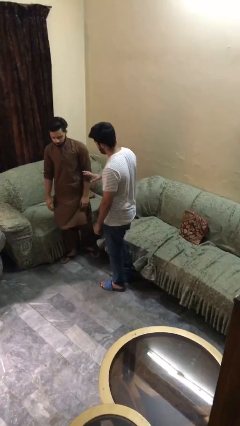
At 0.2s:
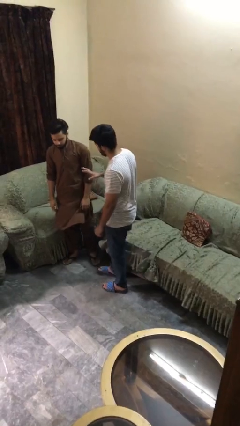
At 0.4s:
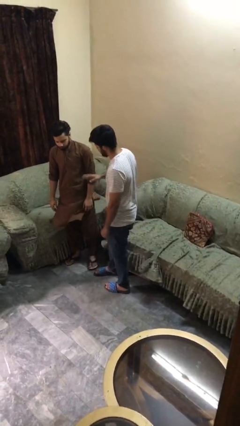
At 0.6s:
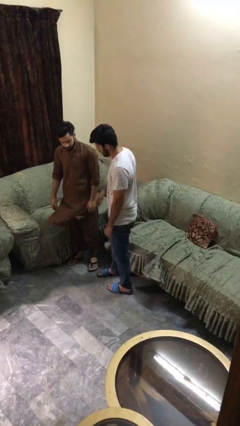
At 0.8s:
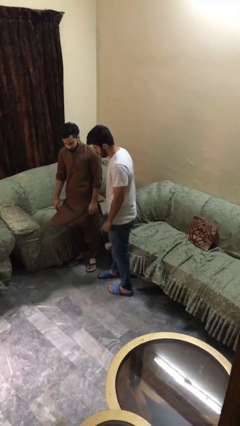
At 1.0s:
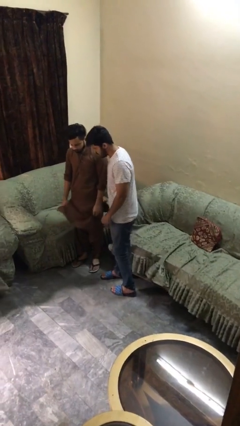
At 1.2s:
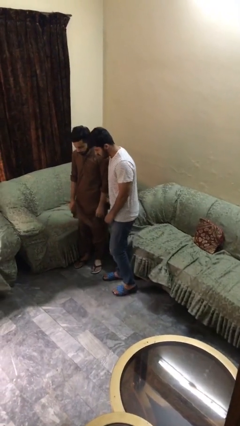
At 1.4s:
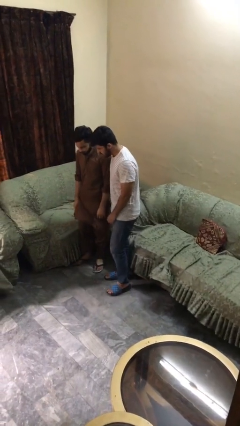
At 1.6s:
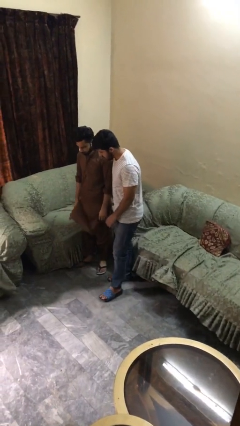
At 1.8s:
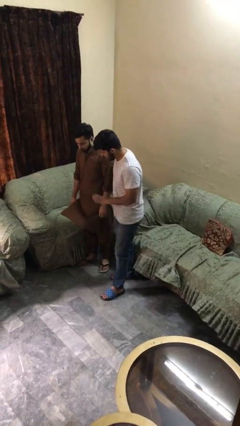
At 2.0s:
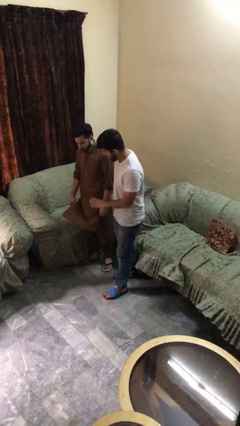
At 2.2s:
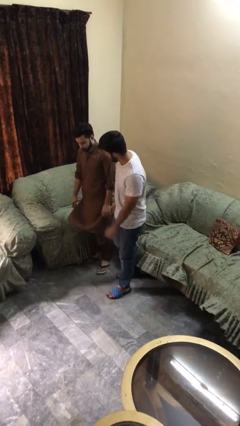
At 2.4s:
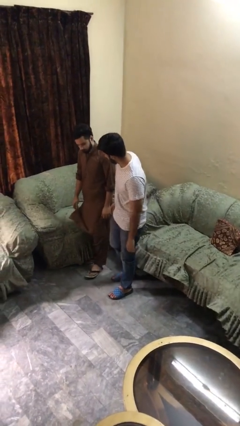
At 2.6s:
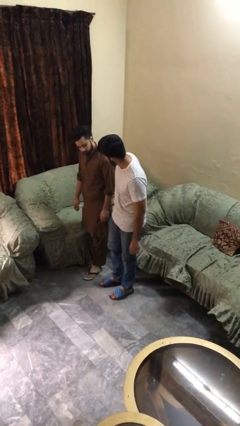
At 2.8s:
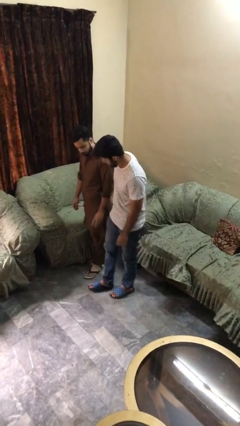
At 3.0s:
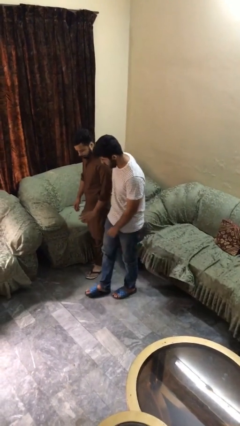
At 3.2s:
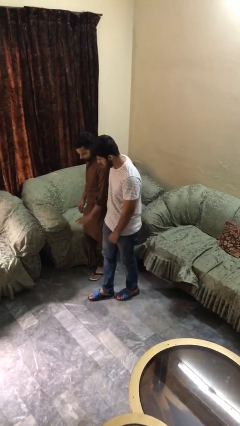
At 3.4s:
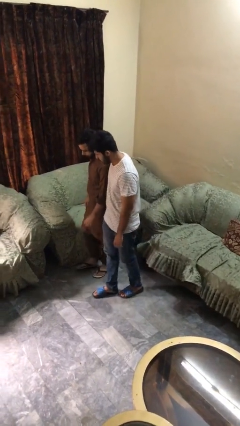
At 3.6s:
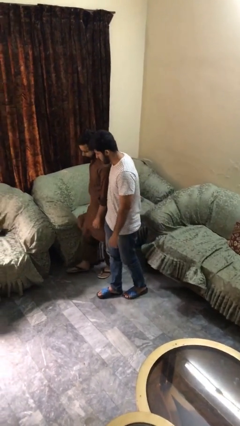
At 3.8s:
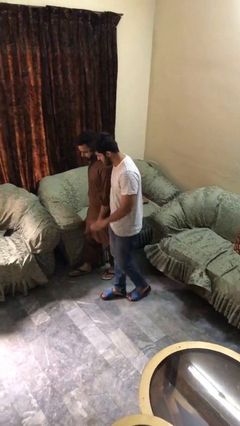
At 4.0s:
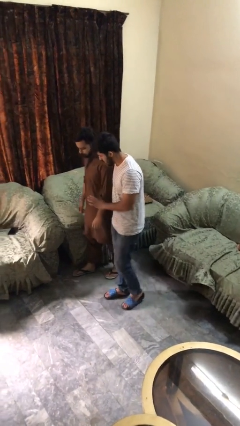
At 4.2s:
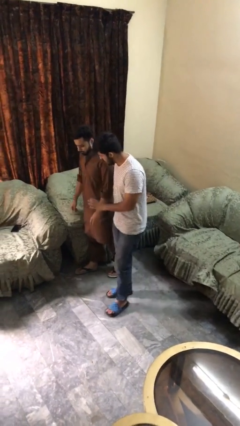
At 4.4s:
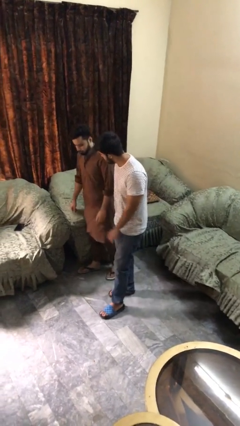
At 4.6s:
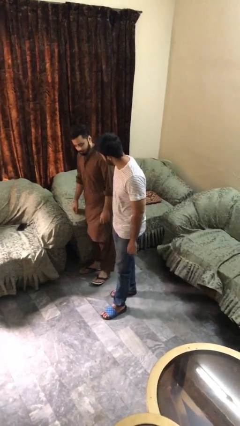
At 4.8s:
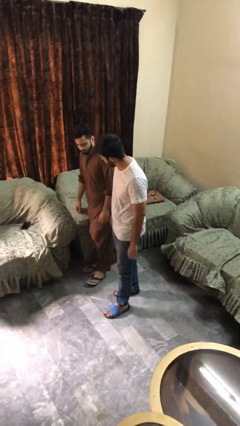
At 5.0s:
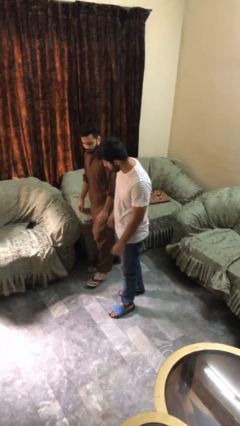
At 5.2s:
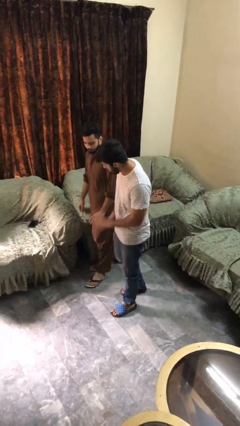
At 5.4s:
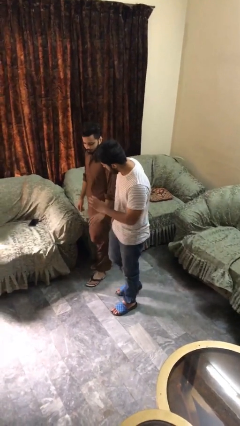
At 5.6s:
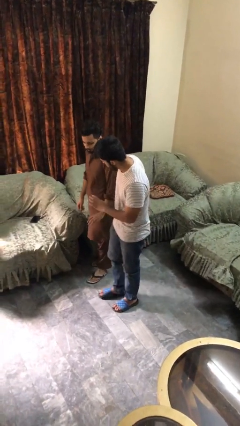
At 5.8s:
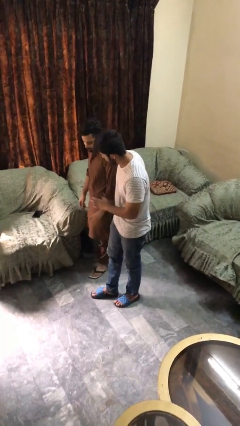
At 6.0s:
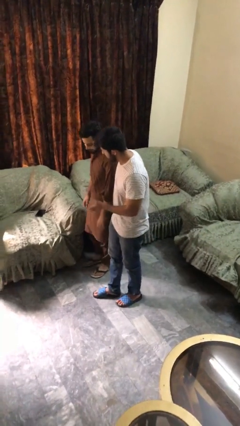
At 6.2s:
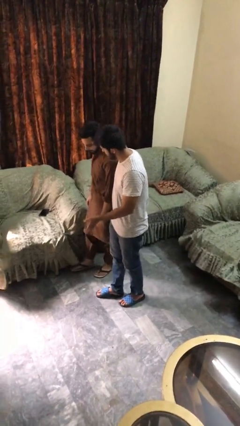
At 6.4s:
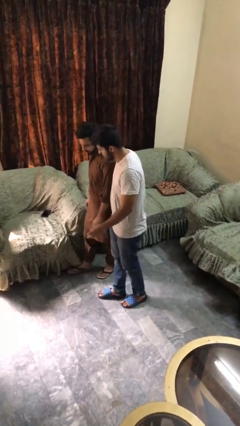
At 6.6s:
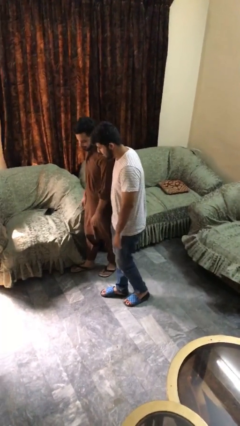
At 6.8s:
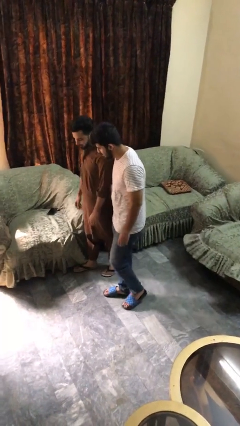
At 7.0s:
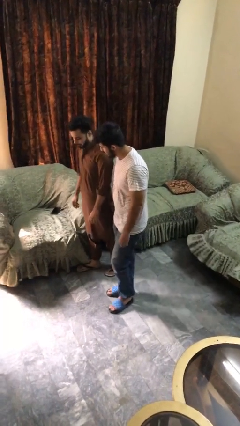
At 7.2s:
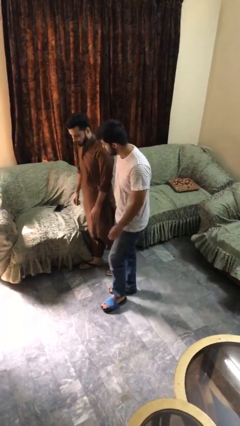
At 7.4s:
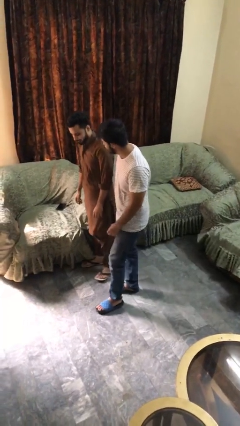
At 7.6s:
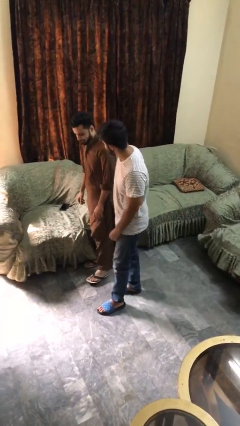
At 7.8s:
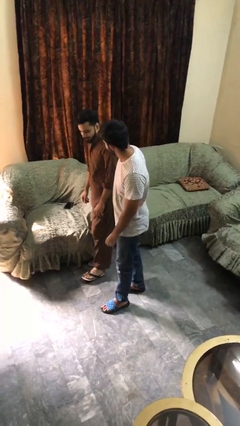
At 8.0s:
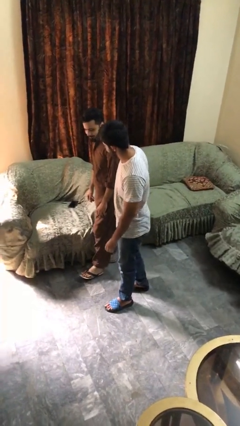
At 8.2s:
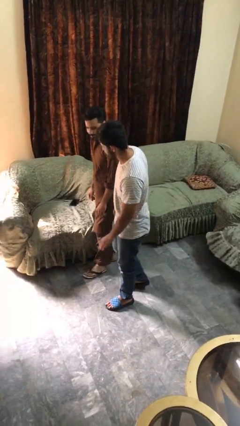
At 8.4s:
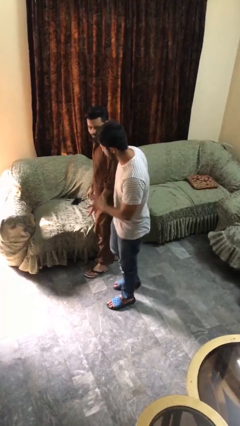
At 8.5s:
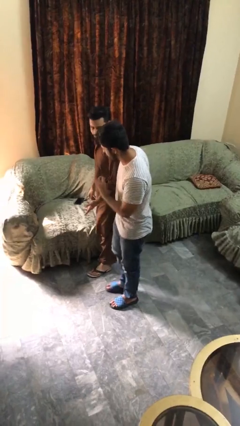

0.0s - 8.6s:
person talks to person

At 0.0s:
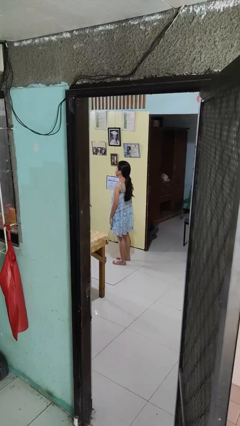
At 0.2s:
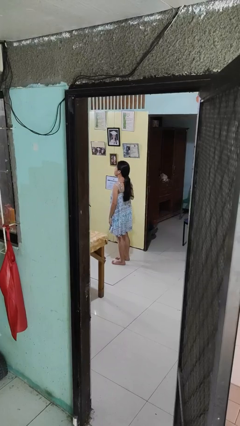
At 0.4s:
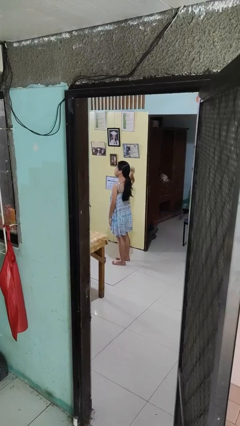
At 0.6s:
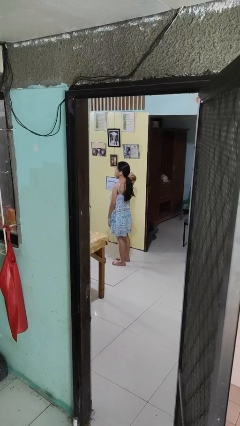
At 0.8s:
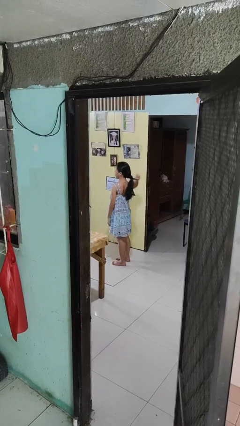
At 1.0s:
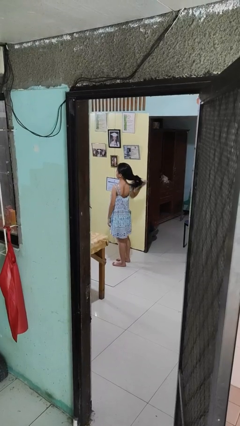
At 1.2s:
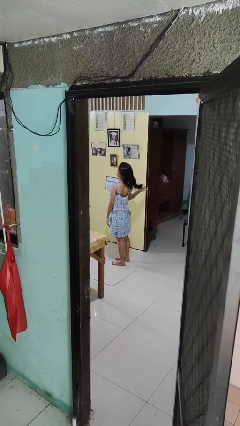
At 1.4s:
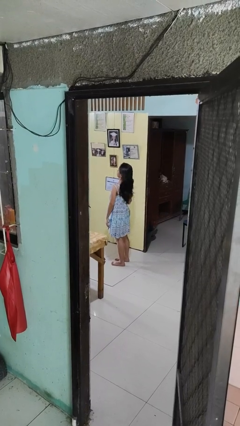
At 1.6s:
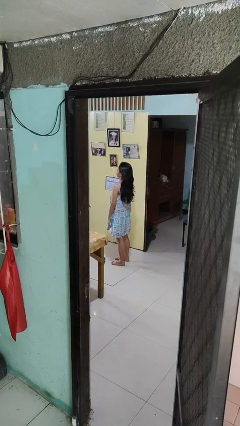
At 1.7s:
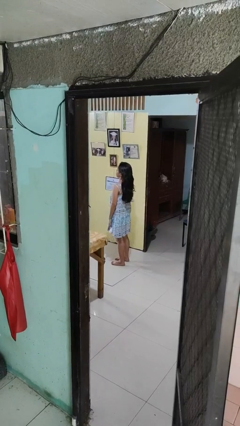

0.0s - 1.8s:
person takes off hairtie

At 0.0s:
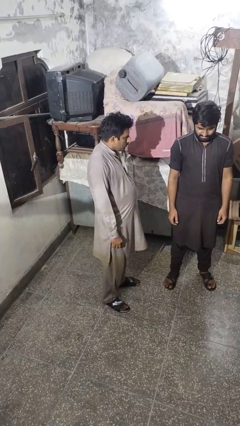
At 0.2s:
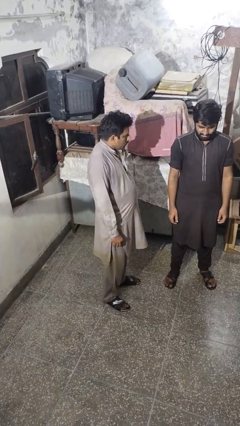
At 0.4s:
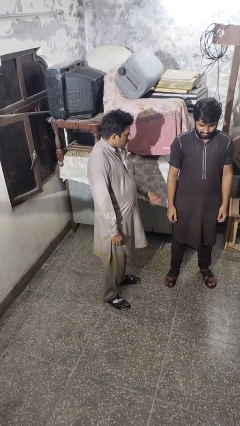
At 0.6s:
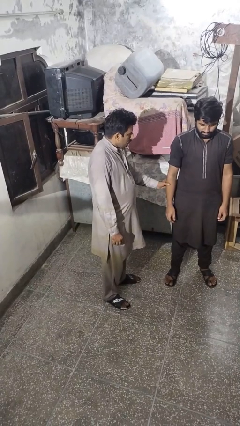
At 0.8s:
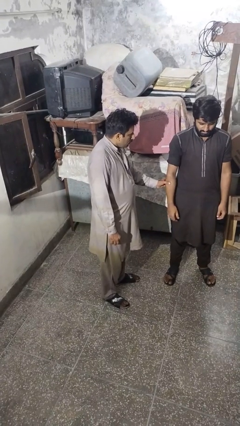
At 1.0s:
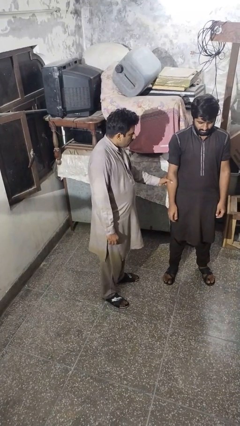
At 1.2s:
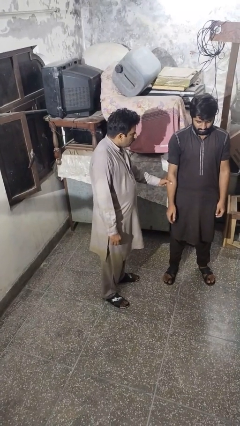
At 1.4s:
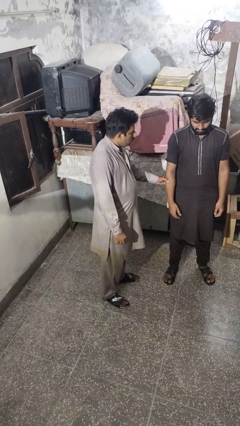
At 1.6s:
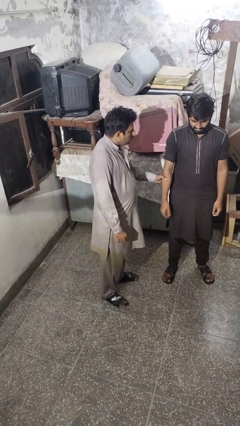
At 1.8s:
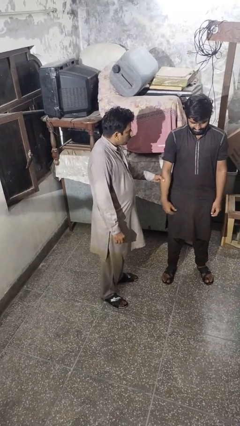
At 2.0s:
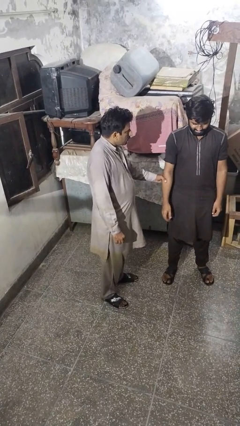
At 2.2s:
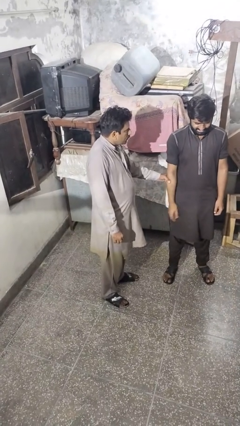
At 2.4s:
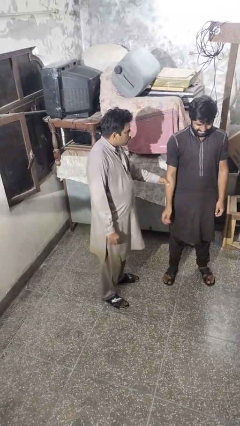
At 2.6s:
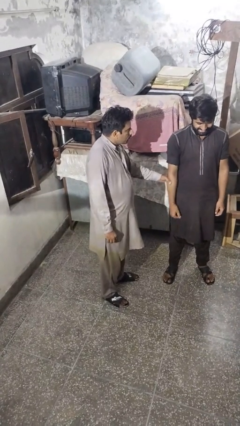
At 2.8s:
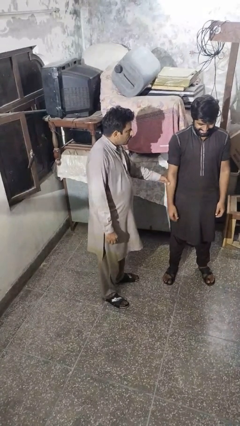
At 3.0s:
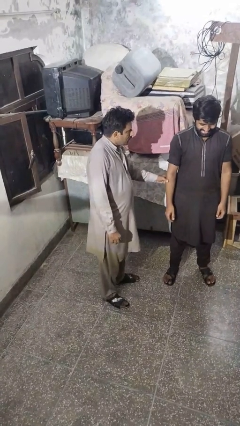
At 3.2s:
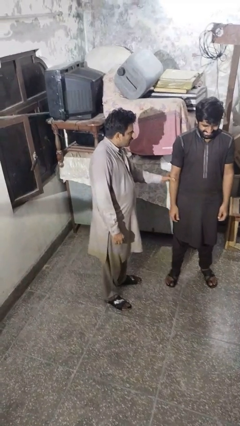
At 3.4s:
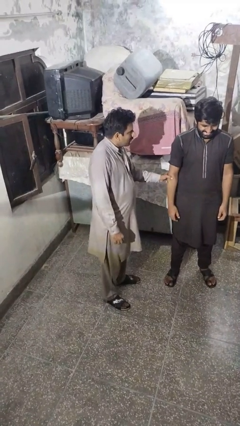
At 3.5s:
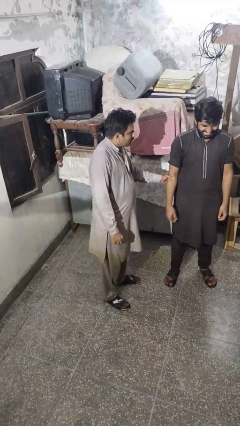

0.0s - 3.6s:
person grabs person by forearm

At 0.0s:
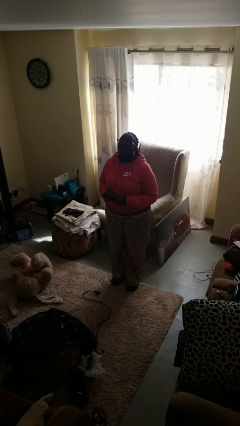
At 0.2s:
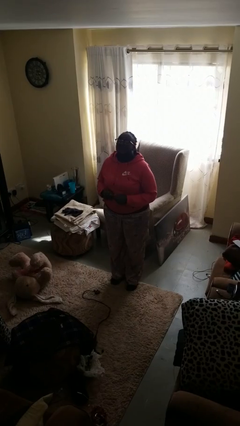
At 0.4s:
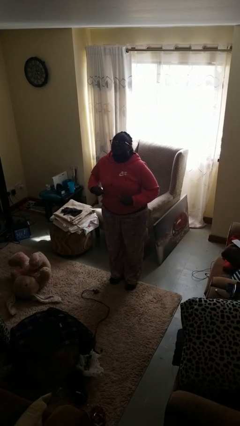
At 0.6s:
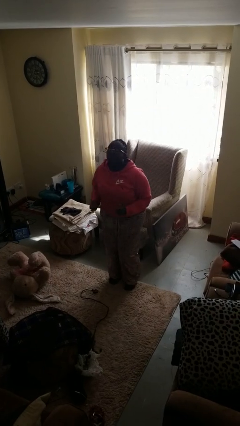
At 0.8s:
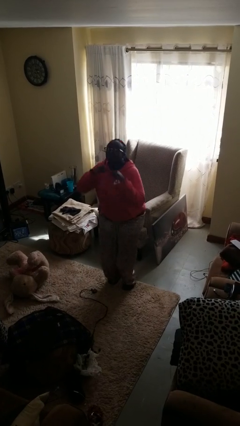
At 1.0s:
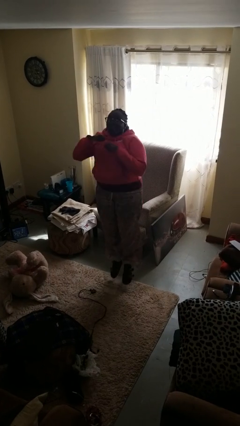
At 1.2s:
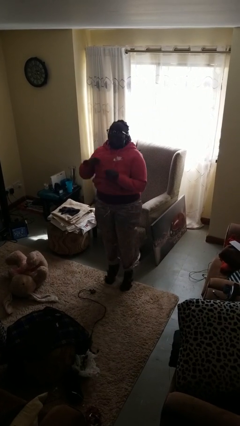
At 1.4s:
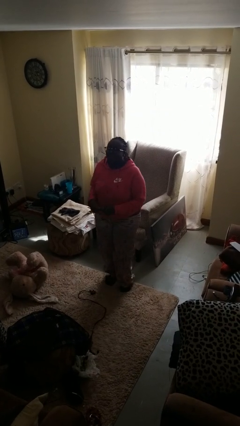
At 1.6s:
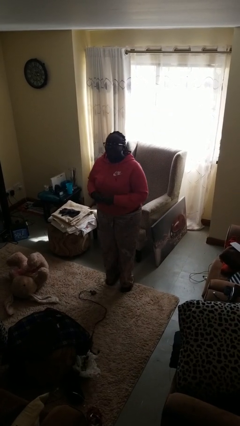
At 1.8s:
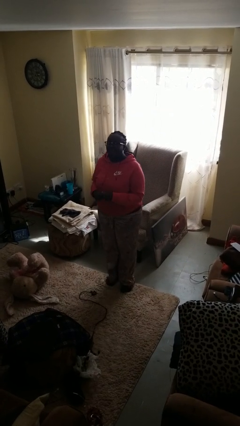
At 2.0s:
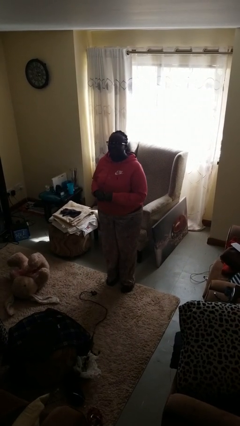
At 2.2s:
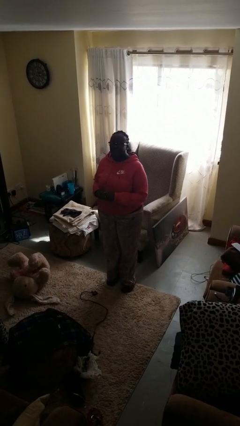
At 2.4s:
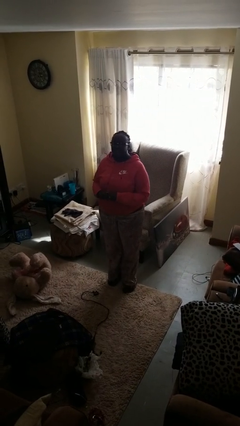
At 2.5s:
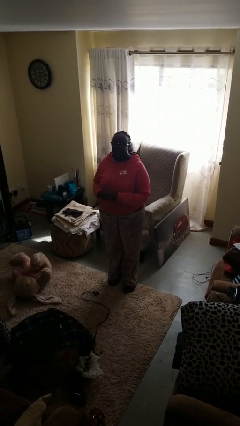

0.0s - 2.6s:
person jumps

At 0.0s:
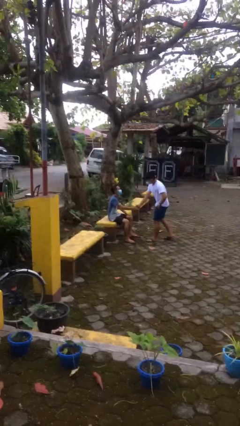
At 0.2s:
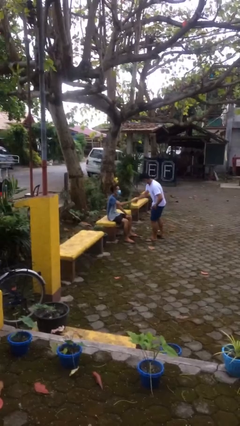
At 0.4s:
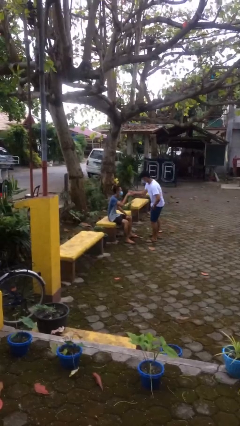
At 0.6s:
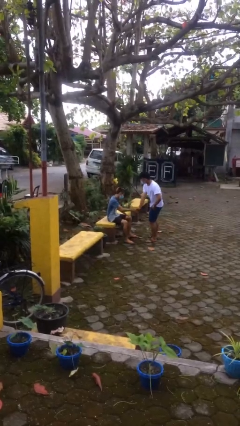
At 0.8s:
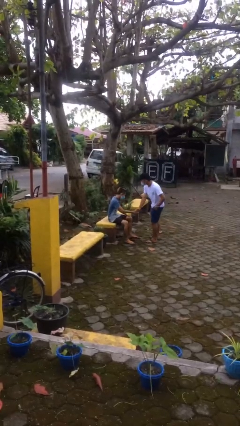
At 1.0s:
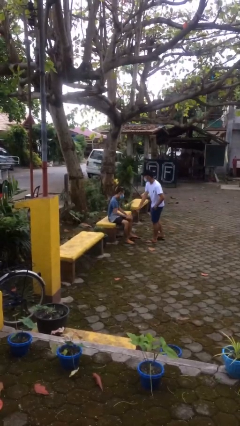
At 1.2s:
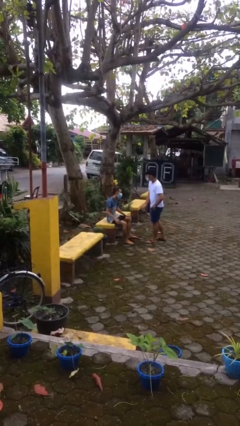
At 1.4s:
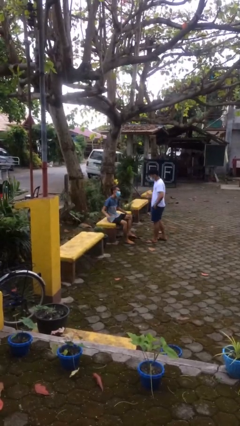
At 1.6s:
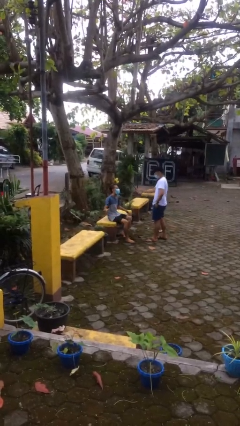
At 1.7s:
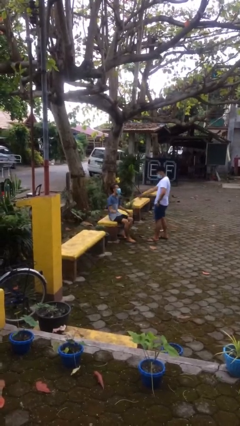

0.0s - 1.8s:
person shakes hand
